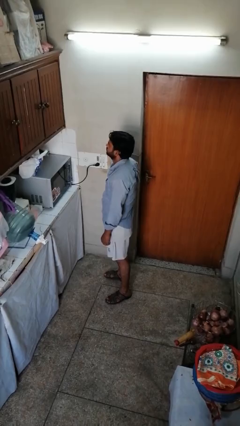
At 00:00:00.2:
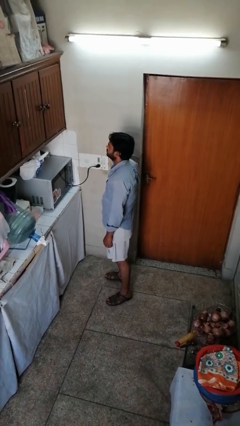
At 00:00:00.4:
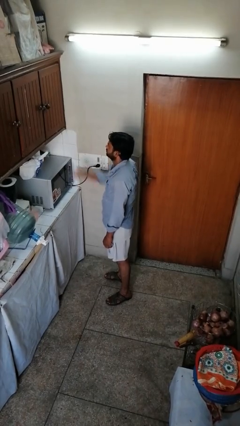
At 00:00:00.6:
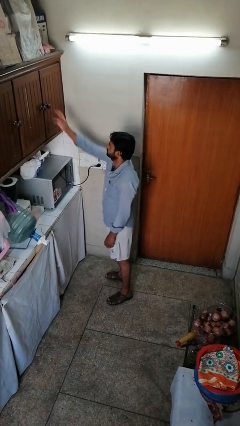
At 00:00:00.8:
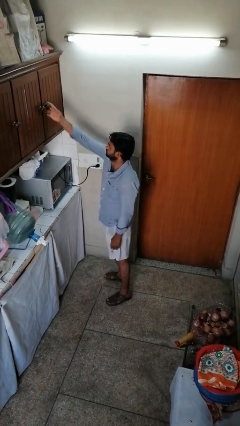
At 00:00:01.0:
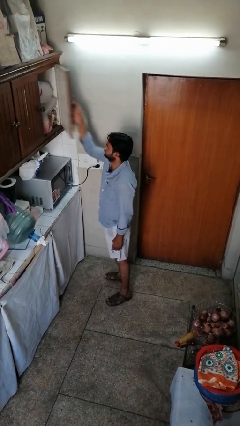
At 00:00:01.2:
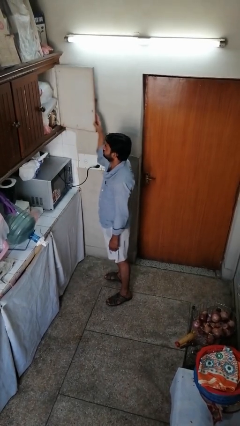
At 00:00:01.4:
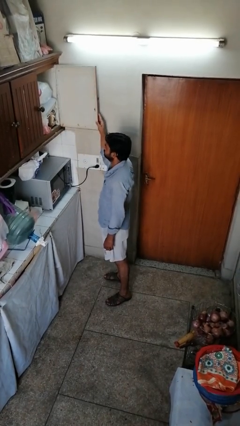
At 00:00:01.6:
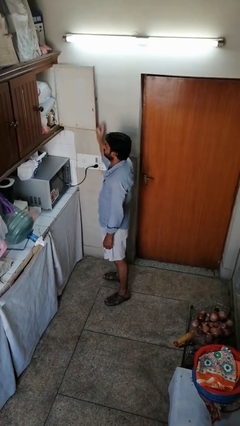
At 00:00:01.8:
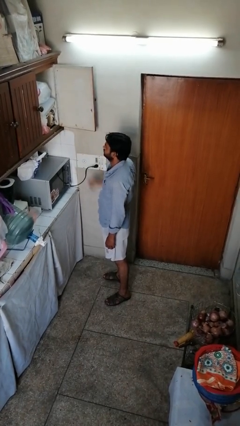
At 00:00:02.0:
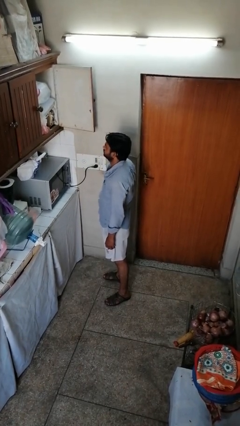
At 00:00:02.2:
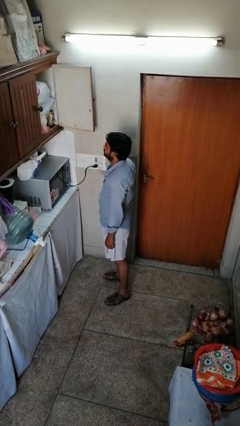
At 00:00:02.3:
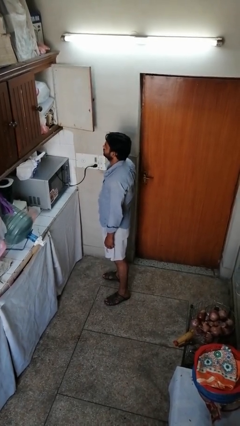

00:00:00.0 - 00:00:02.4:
person opens cabinet

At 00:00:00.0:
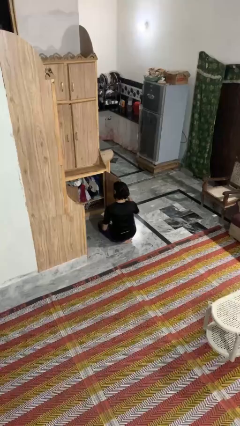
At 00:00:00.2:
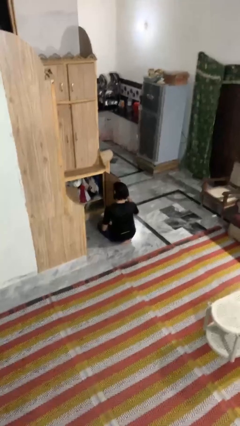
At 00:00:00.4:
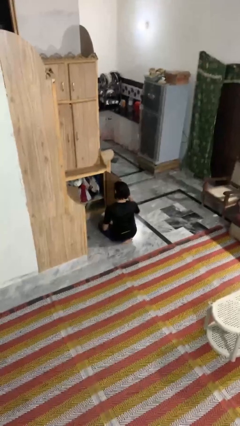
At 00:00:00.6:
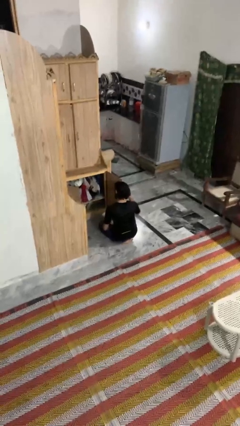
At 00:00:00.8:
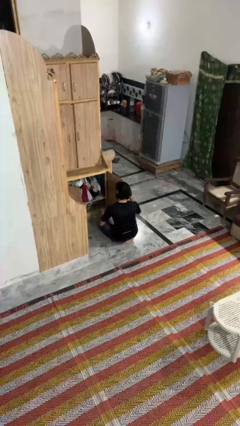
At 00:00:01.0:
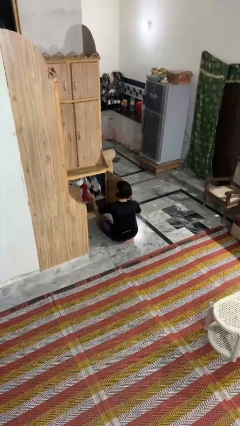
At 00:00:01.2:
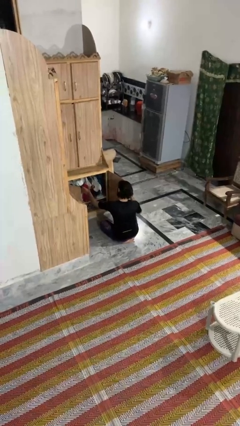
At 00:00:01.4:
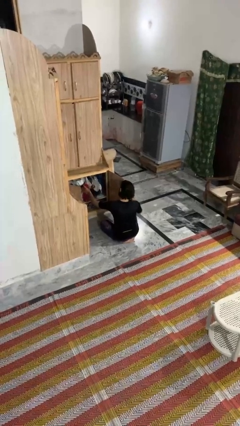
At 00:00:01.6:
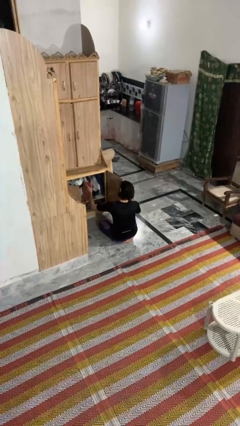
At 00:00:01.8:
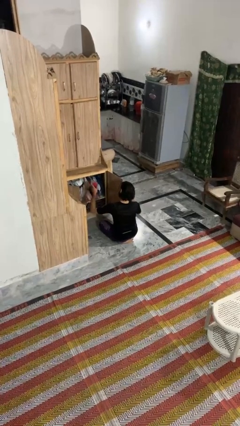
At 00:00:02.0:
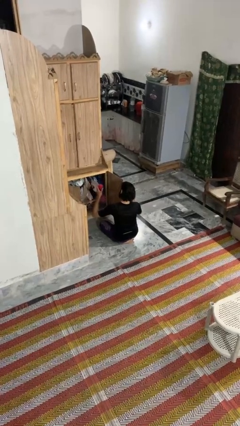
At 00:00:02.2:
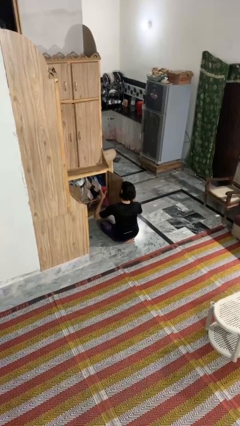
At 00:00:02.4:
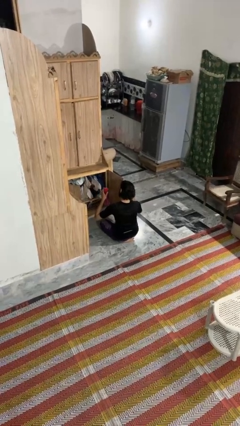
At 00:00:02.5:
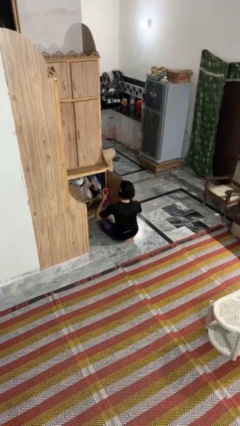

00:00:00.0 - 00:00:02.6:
person picks up object from cabinet

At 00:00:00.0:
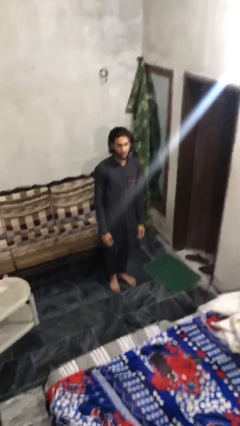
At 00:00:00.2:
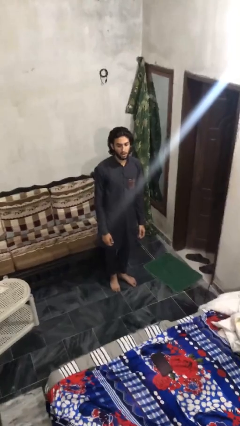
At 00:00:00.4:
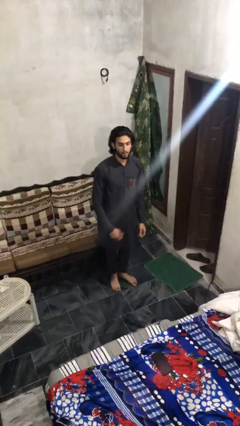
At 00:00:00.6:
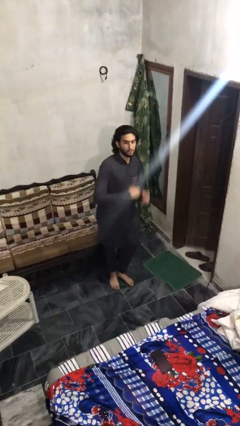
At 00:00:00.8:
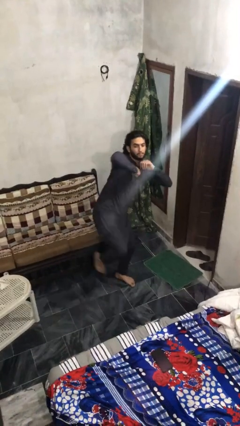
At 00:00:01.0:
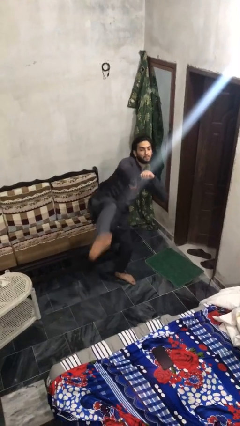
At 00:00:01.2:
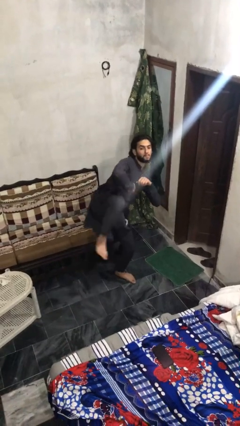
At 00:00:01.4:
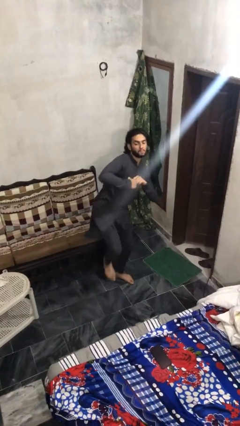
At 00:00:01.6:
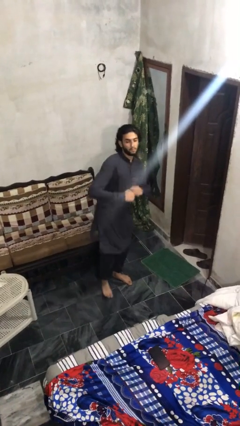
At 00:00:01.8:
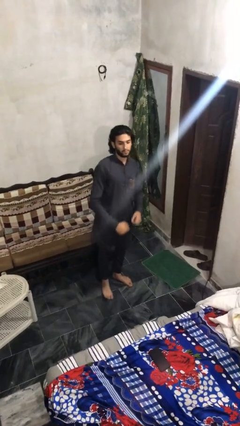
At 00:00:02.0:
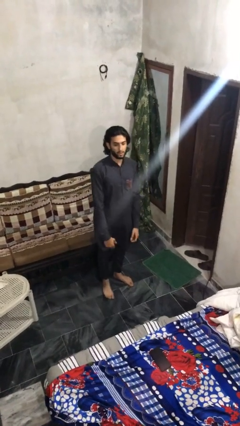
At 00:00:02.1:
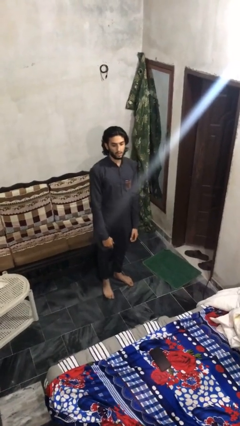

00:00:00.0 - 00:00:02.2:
person karate kicks

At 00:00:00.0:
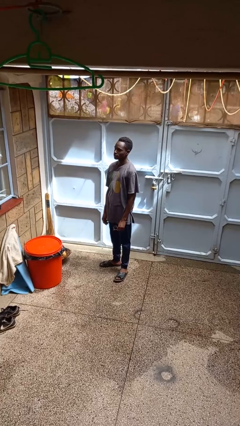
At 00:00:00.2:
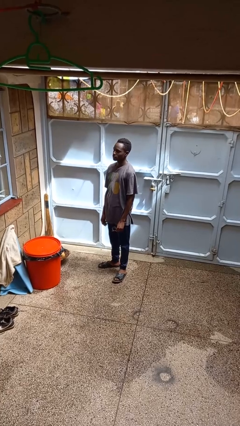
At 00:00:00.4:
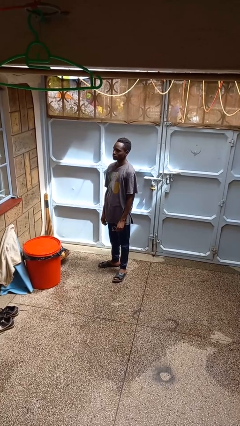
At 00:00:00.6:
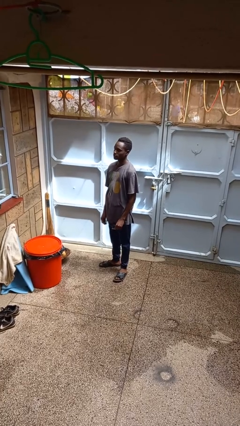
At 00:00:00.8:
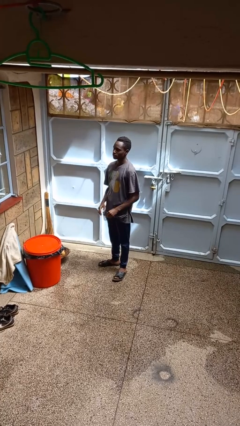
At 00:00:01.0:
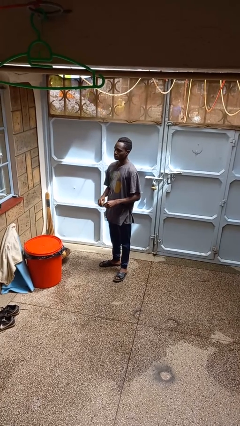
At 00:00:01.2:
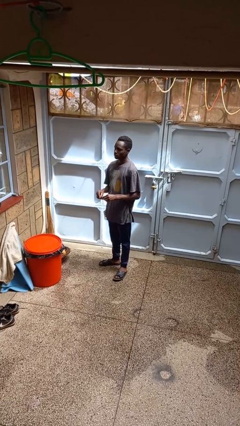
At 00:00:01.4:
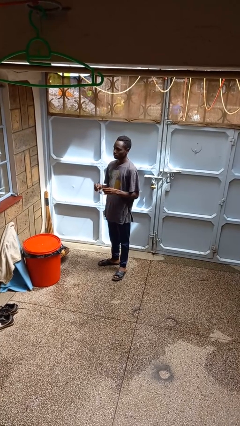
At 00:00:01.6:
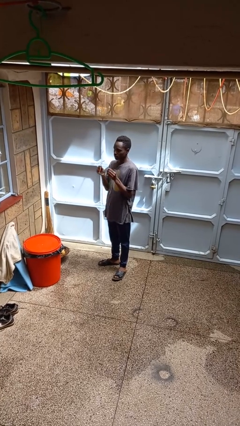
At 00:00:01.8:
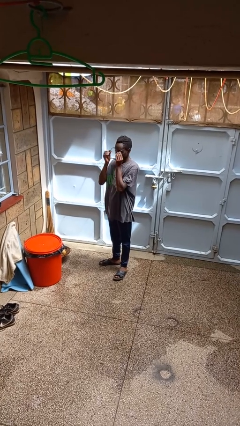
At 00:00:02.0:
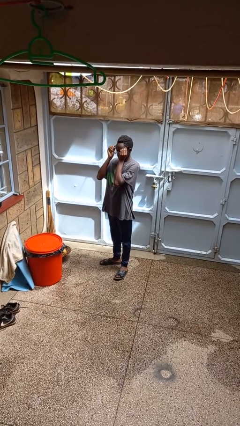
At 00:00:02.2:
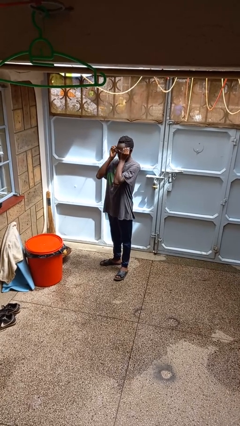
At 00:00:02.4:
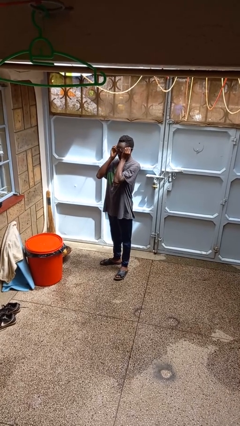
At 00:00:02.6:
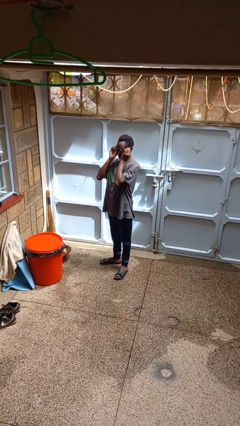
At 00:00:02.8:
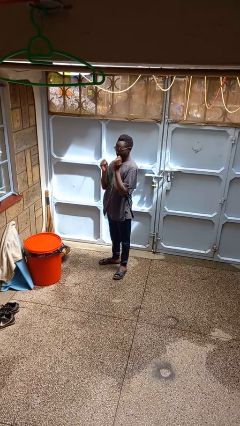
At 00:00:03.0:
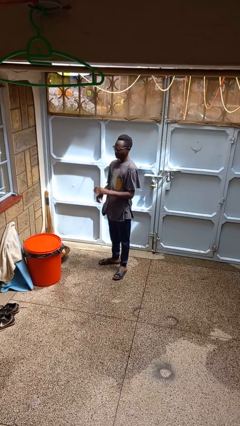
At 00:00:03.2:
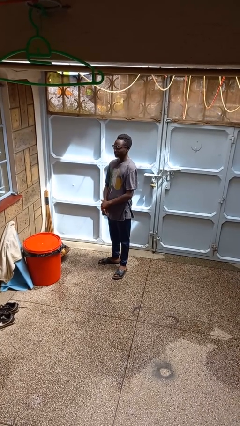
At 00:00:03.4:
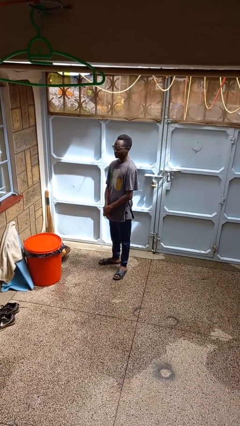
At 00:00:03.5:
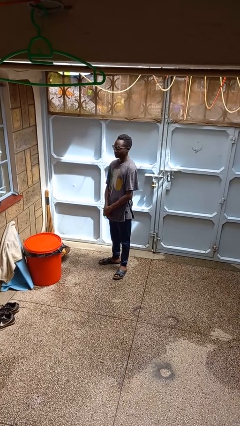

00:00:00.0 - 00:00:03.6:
person puts on glasses

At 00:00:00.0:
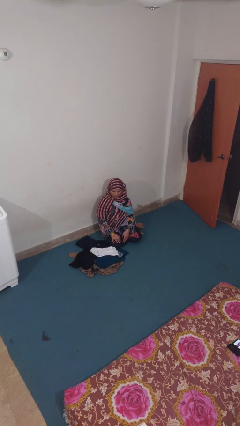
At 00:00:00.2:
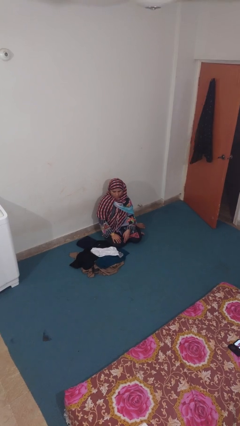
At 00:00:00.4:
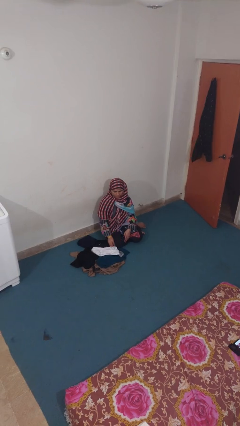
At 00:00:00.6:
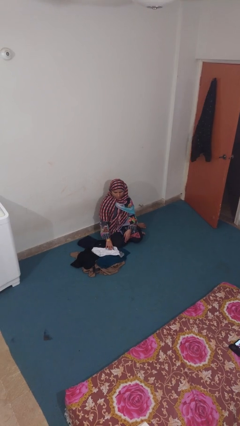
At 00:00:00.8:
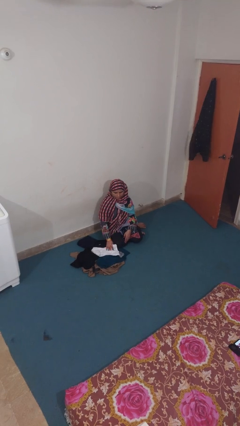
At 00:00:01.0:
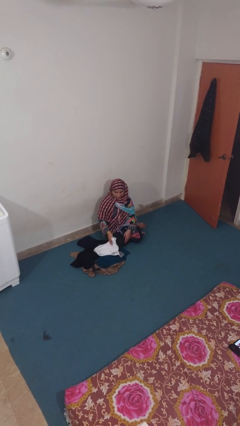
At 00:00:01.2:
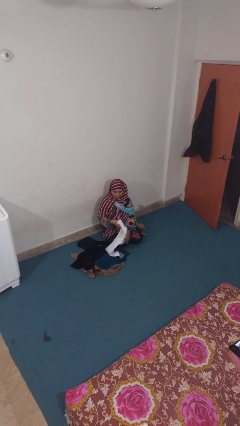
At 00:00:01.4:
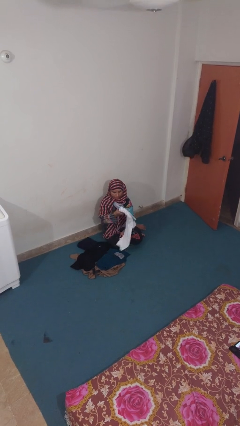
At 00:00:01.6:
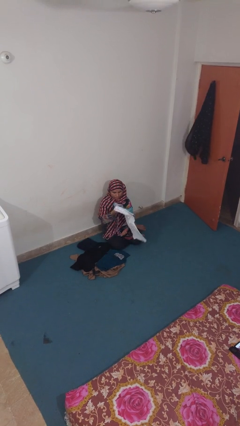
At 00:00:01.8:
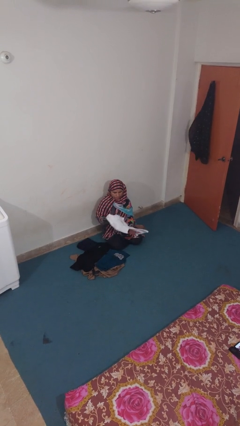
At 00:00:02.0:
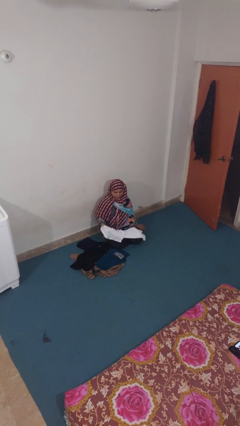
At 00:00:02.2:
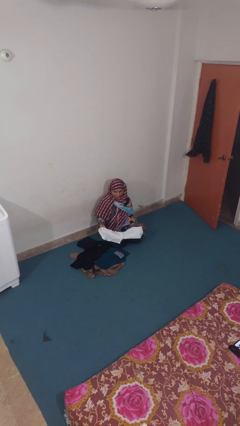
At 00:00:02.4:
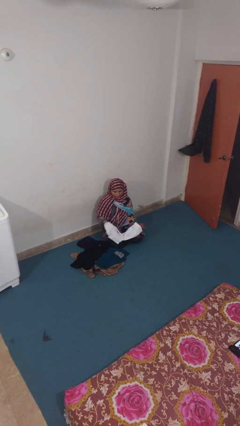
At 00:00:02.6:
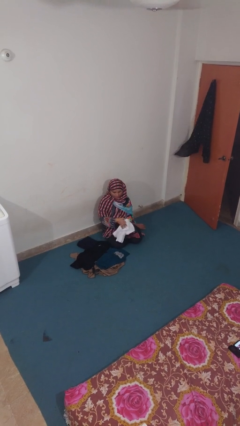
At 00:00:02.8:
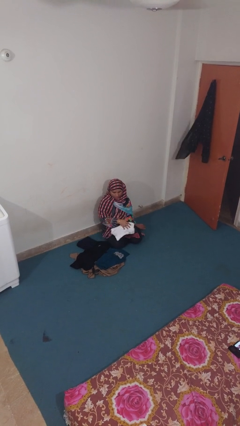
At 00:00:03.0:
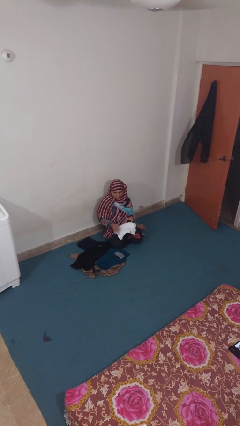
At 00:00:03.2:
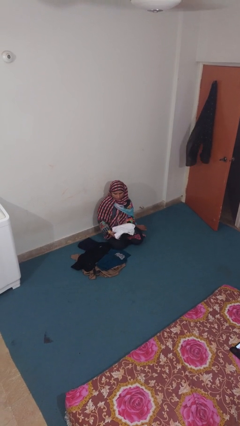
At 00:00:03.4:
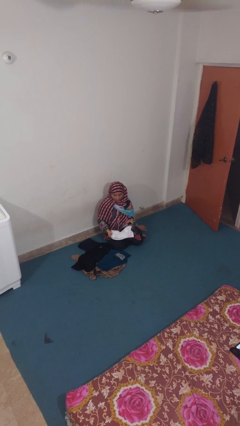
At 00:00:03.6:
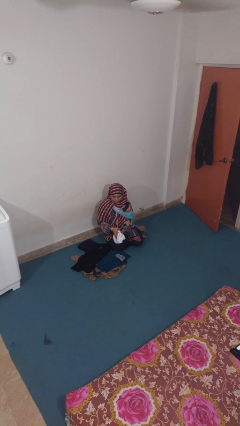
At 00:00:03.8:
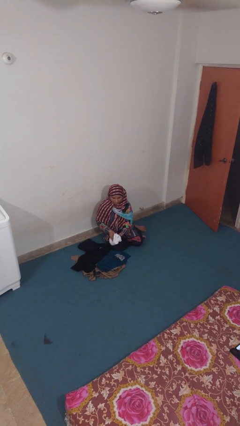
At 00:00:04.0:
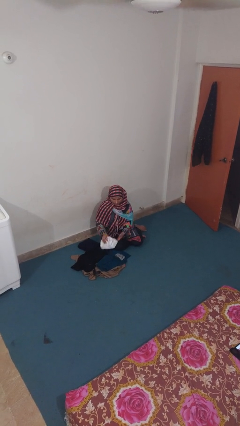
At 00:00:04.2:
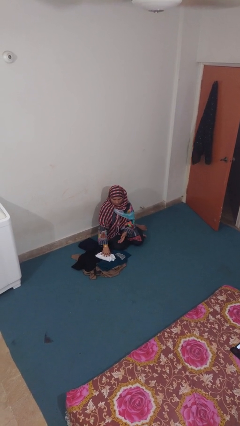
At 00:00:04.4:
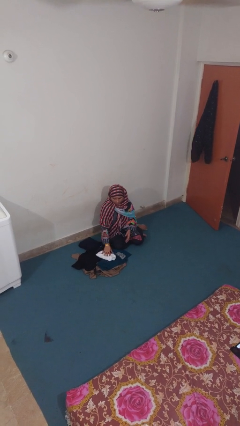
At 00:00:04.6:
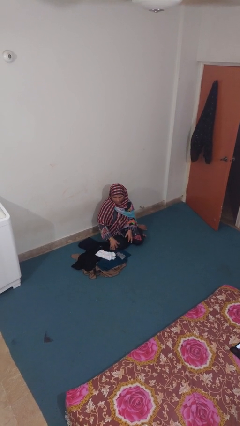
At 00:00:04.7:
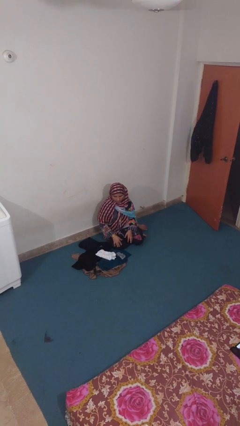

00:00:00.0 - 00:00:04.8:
person folds shirt

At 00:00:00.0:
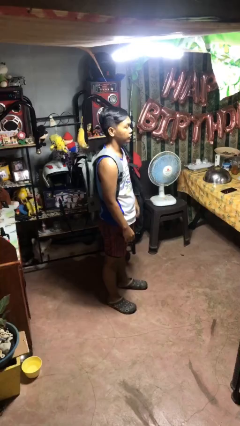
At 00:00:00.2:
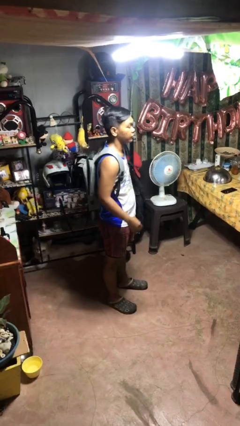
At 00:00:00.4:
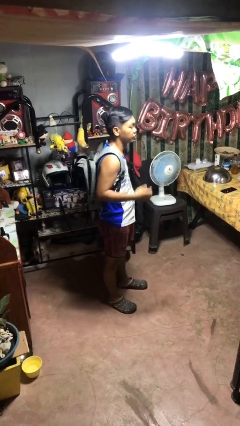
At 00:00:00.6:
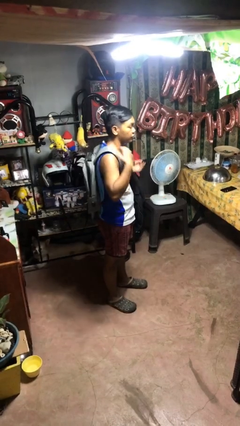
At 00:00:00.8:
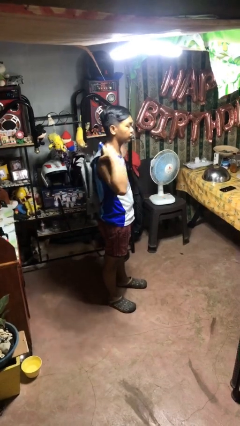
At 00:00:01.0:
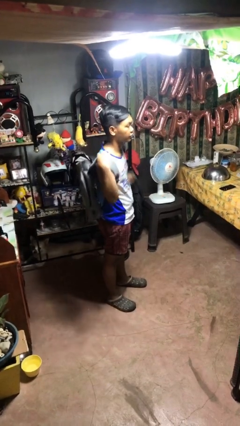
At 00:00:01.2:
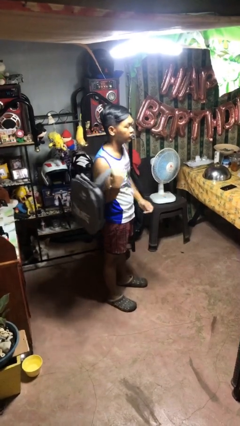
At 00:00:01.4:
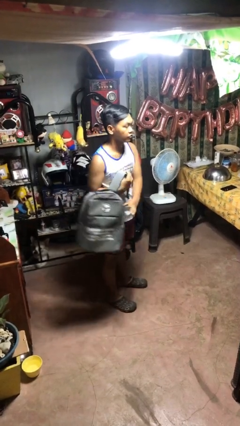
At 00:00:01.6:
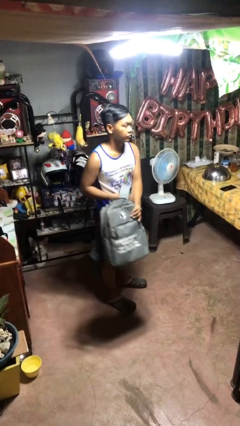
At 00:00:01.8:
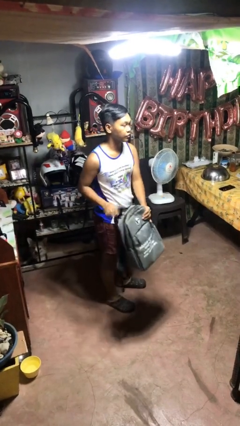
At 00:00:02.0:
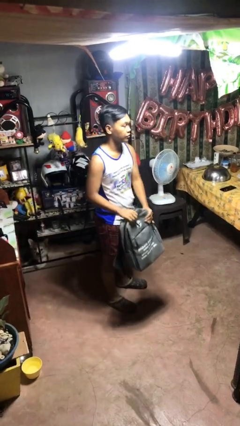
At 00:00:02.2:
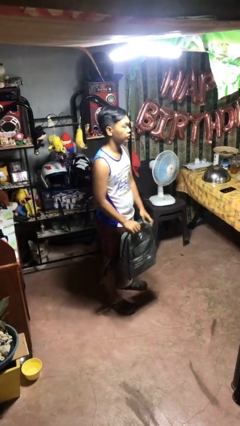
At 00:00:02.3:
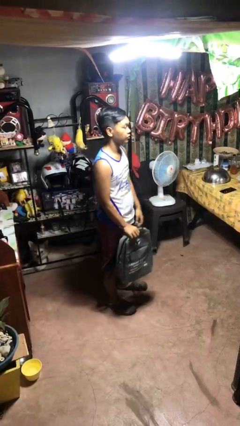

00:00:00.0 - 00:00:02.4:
person takes off backpack
